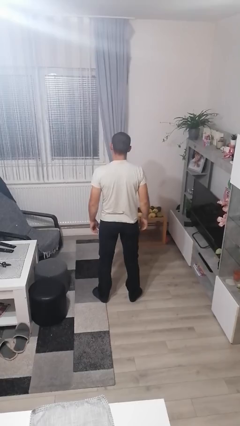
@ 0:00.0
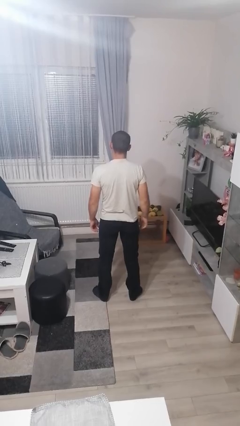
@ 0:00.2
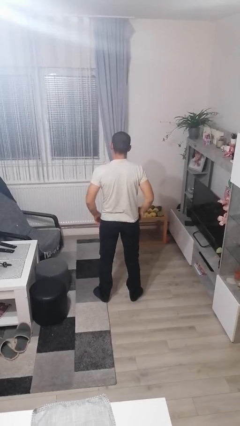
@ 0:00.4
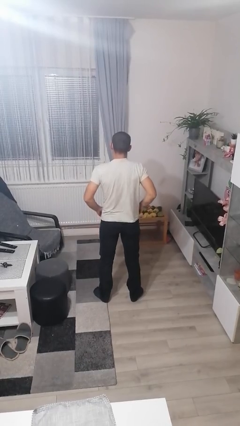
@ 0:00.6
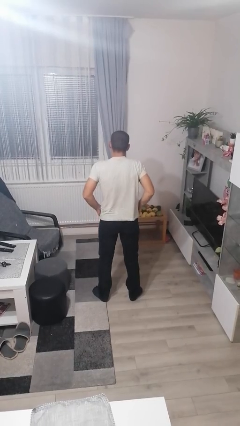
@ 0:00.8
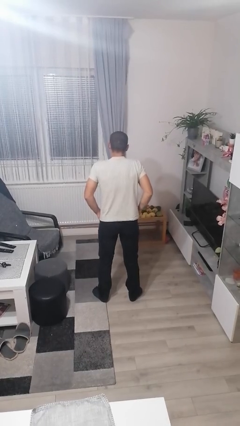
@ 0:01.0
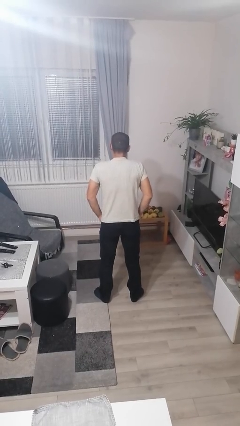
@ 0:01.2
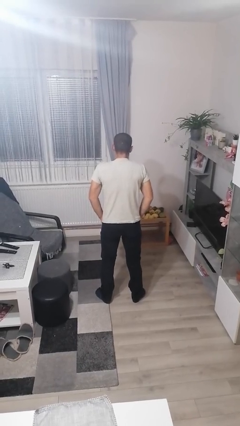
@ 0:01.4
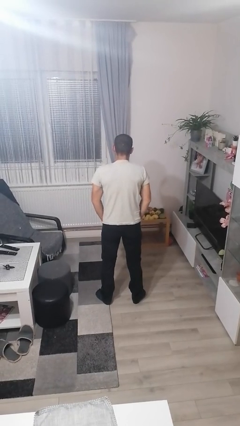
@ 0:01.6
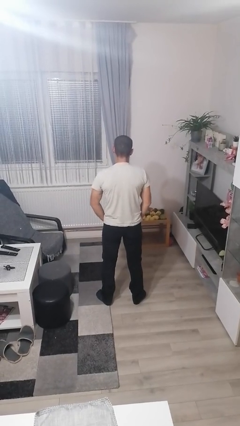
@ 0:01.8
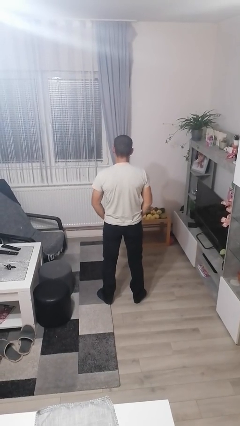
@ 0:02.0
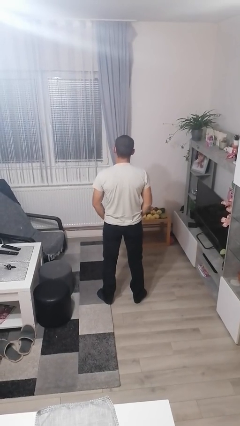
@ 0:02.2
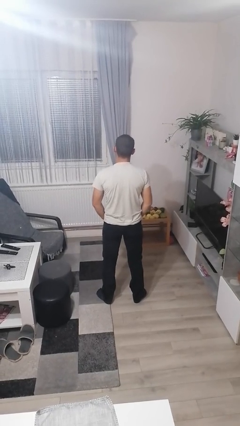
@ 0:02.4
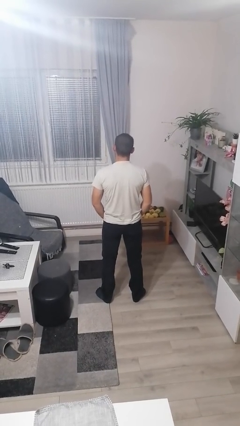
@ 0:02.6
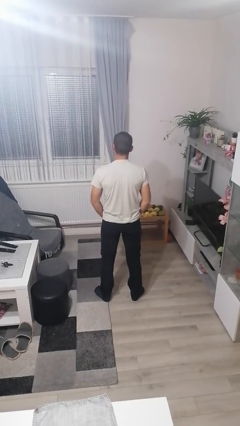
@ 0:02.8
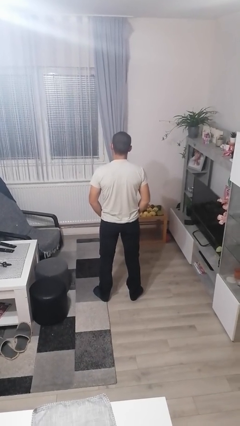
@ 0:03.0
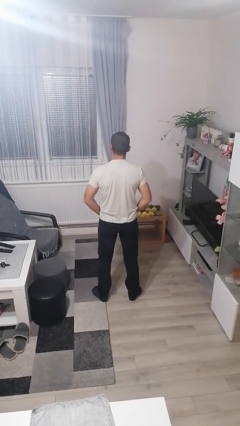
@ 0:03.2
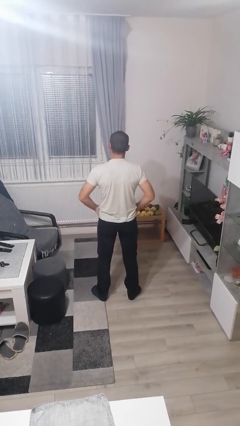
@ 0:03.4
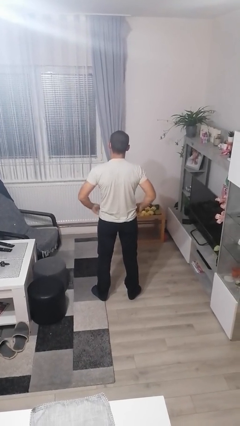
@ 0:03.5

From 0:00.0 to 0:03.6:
person puts hands in back pockets

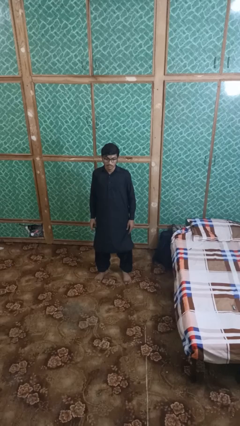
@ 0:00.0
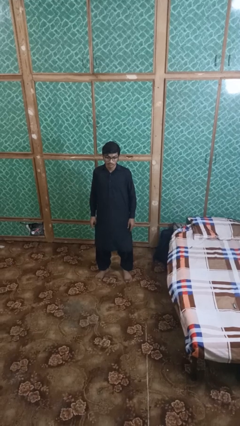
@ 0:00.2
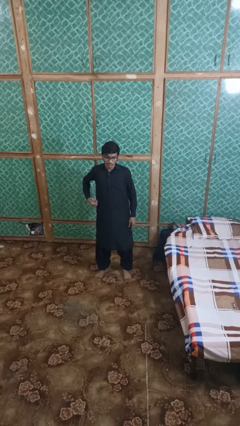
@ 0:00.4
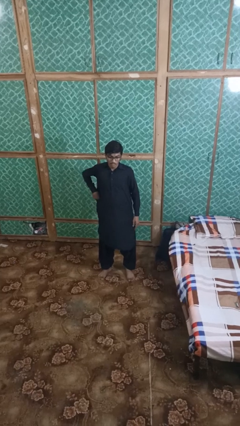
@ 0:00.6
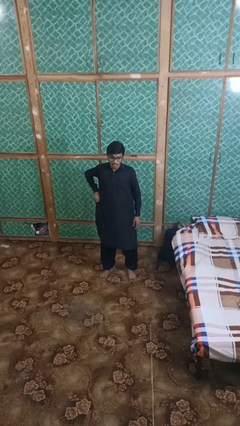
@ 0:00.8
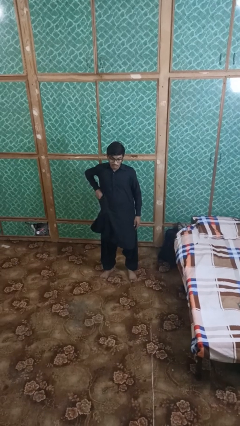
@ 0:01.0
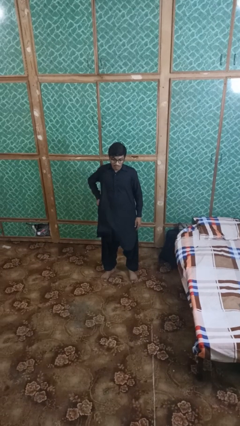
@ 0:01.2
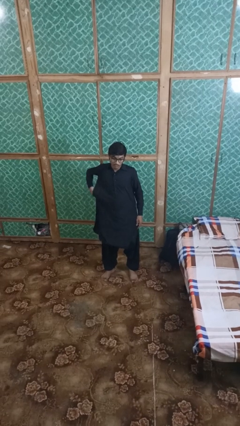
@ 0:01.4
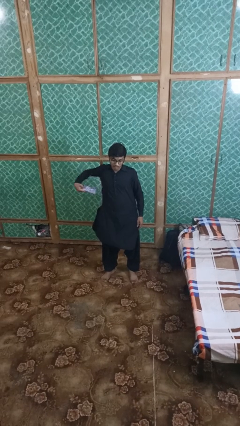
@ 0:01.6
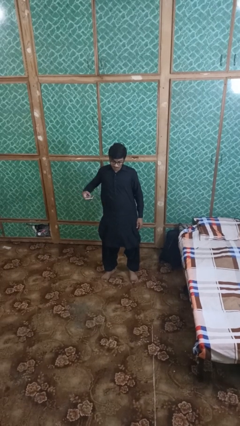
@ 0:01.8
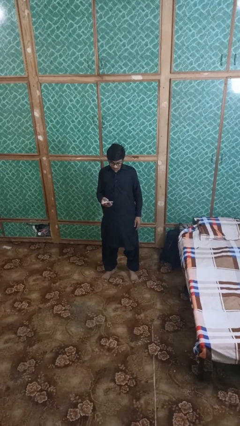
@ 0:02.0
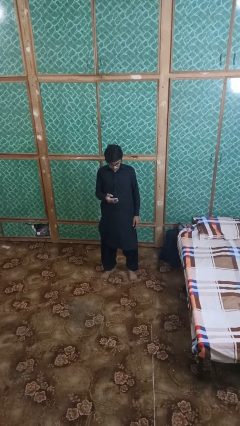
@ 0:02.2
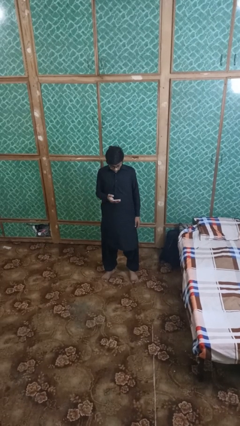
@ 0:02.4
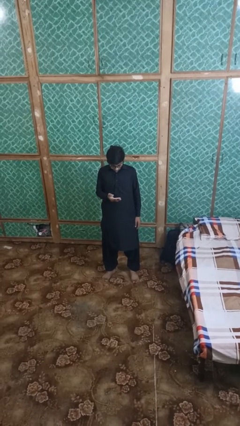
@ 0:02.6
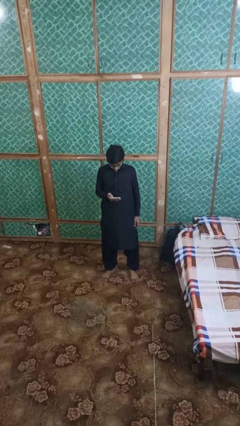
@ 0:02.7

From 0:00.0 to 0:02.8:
person takes phone from pocket

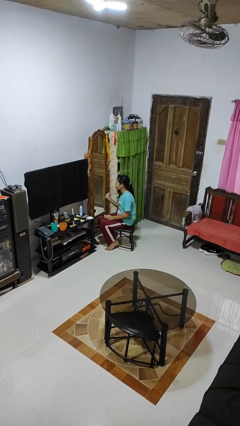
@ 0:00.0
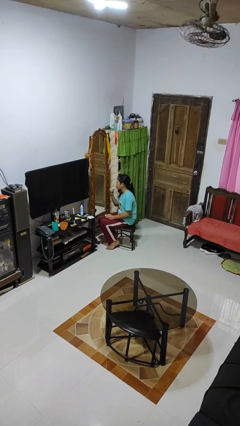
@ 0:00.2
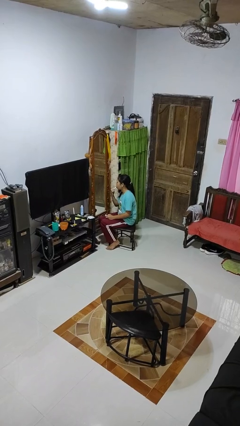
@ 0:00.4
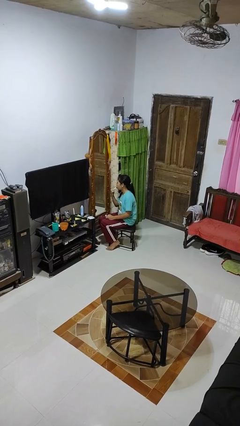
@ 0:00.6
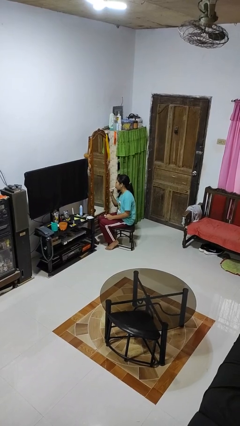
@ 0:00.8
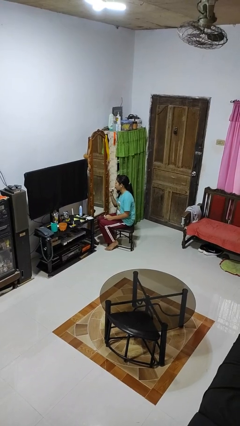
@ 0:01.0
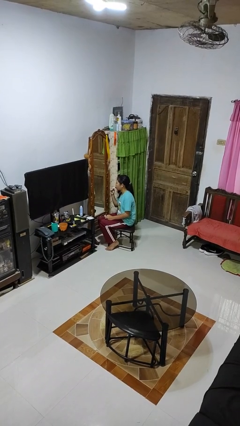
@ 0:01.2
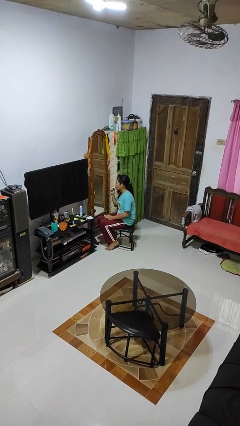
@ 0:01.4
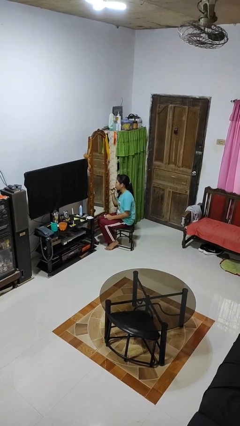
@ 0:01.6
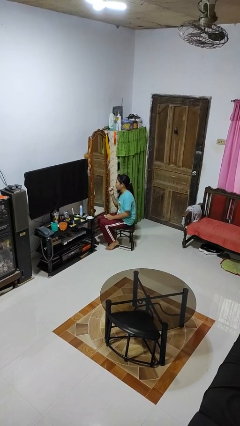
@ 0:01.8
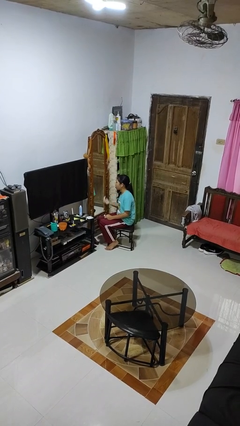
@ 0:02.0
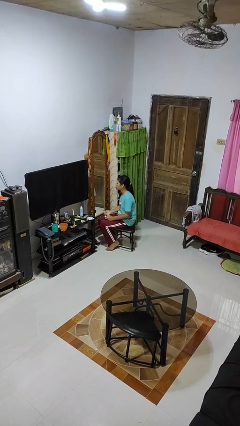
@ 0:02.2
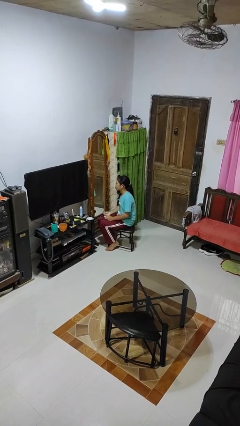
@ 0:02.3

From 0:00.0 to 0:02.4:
person applies lip makeup

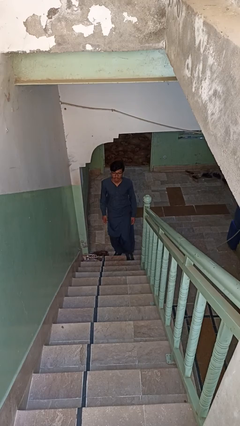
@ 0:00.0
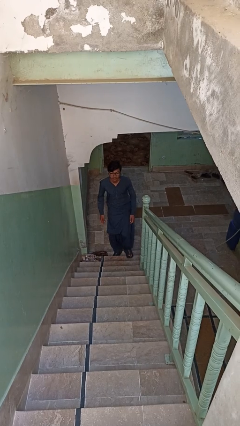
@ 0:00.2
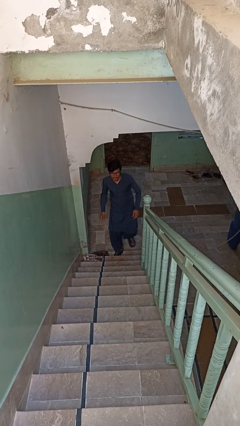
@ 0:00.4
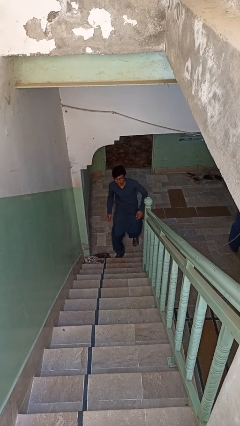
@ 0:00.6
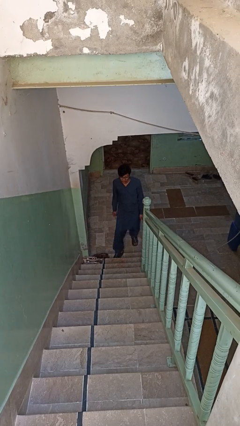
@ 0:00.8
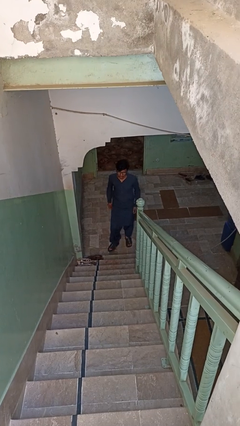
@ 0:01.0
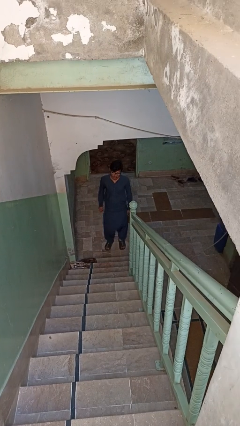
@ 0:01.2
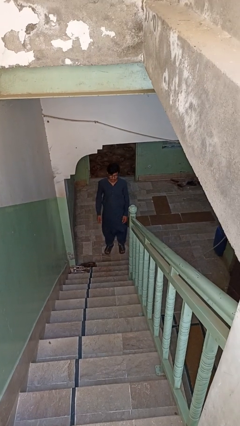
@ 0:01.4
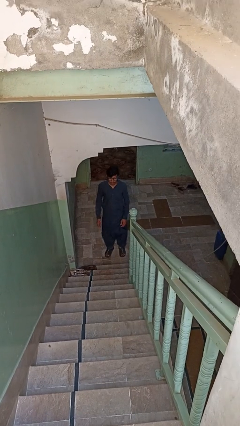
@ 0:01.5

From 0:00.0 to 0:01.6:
person climbs down stairs

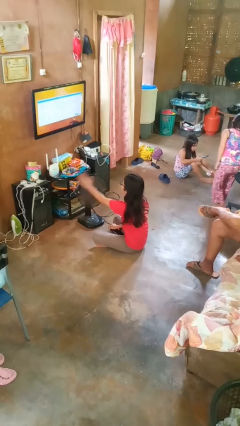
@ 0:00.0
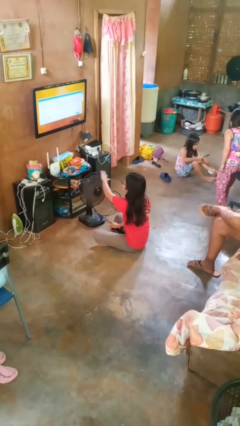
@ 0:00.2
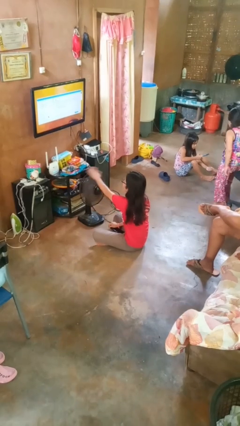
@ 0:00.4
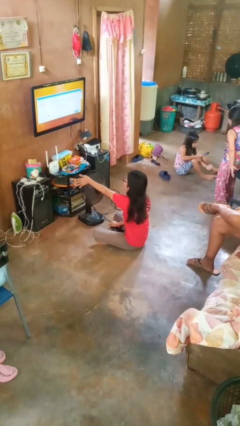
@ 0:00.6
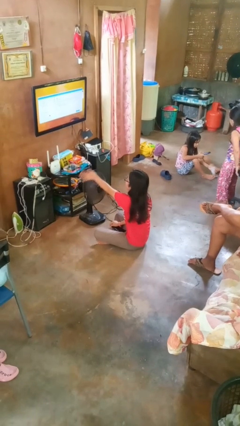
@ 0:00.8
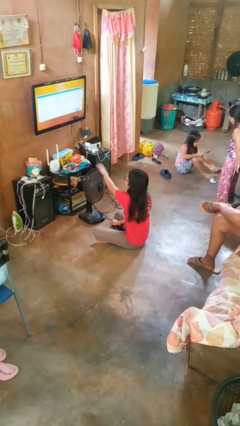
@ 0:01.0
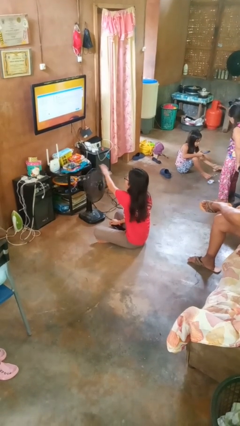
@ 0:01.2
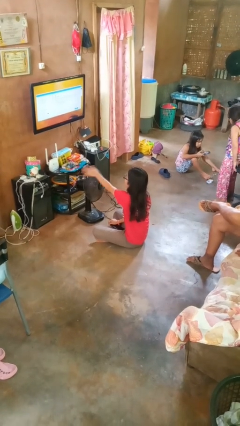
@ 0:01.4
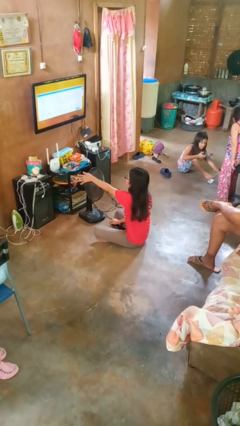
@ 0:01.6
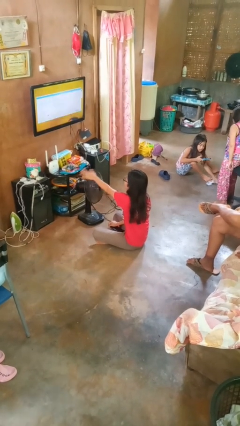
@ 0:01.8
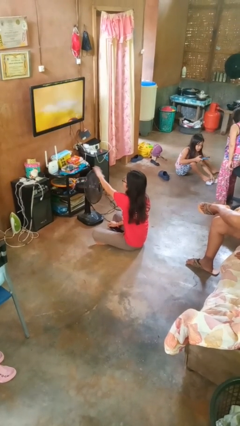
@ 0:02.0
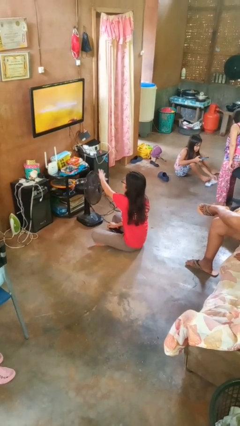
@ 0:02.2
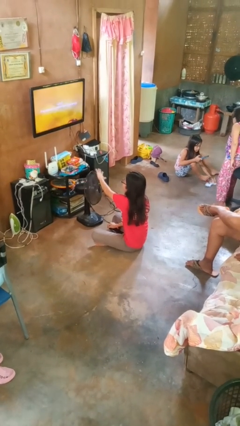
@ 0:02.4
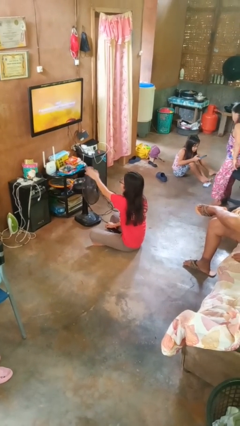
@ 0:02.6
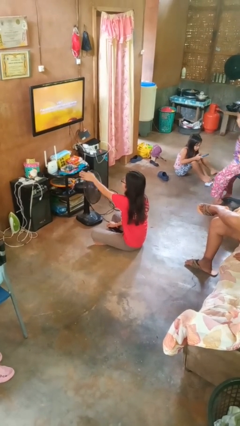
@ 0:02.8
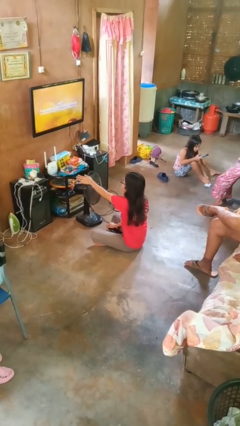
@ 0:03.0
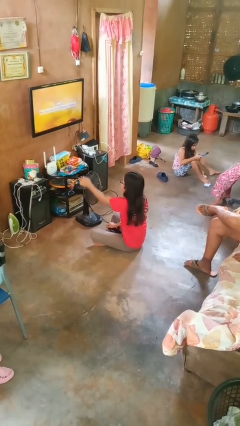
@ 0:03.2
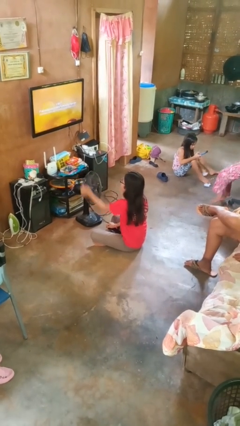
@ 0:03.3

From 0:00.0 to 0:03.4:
person waves hand over object

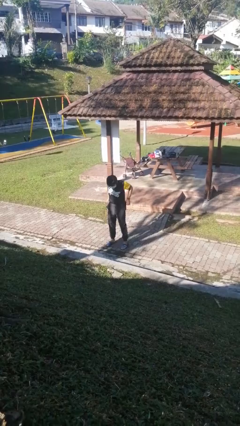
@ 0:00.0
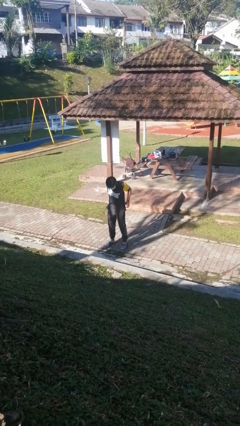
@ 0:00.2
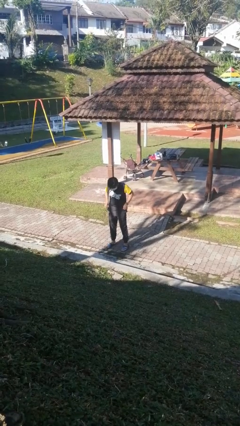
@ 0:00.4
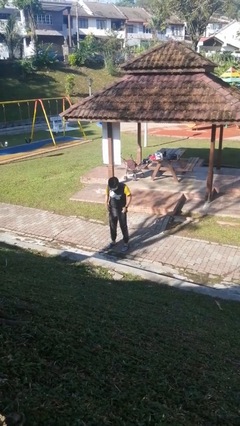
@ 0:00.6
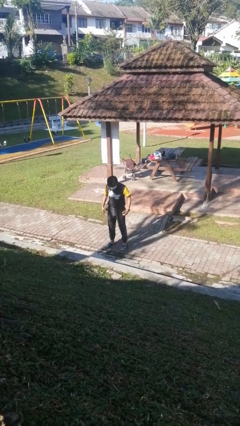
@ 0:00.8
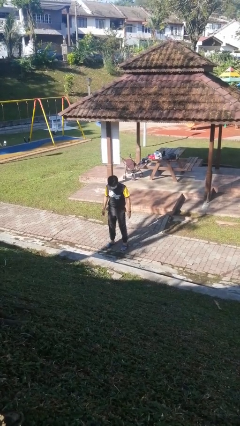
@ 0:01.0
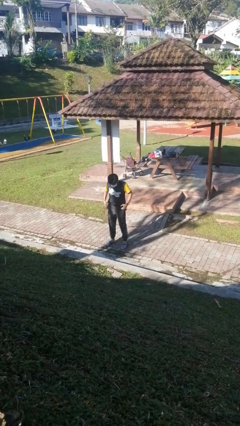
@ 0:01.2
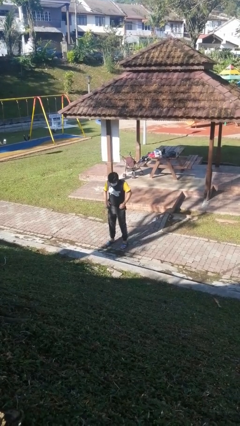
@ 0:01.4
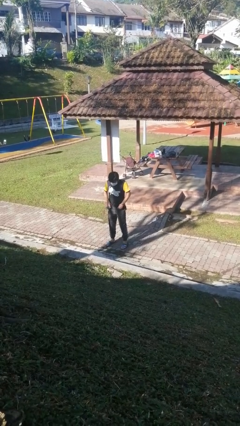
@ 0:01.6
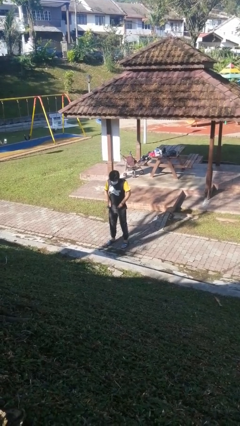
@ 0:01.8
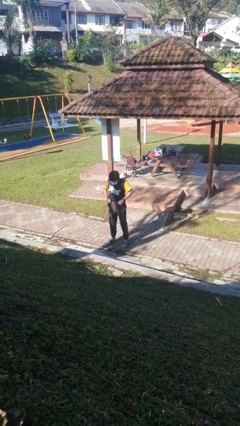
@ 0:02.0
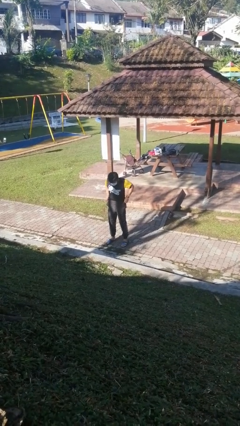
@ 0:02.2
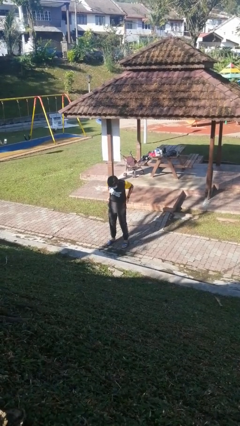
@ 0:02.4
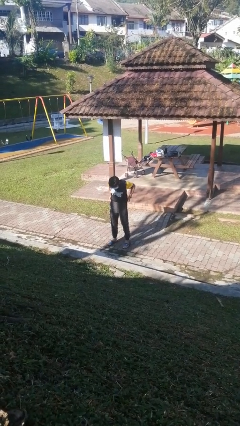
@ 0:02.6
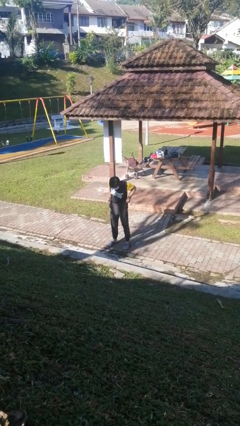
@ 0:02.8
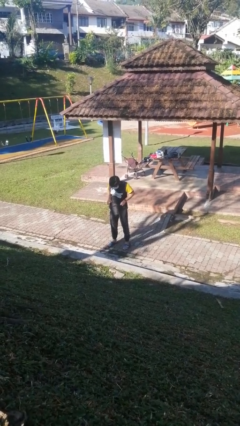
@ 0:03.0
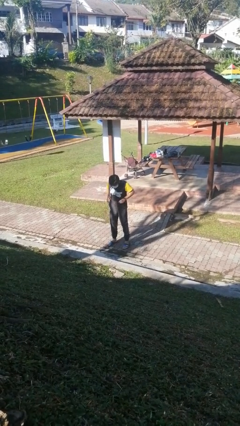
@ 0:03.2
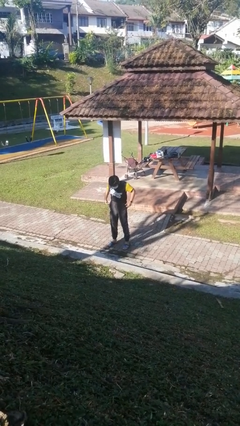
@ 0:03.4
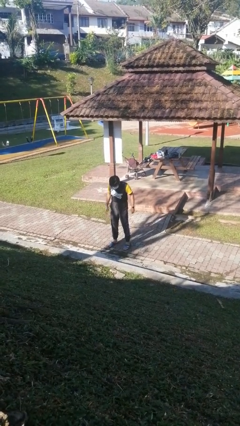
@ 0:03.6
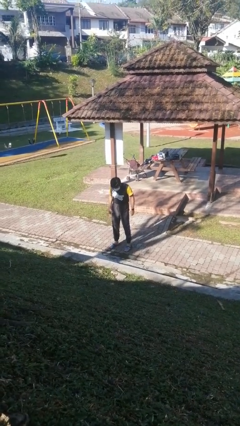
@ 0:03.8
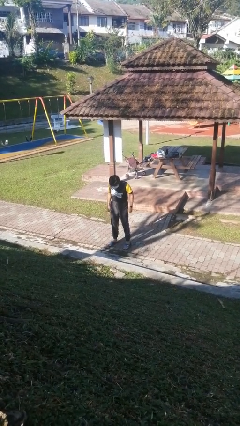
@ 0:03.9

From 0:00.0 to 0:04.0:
person hikes up pants
